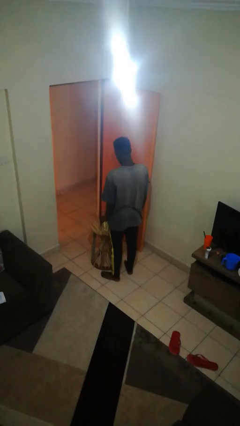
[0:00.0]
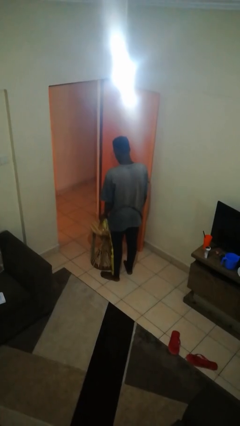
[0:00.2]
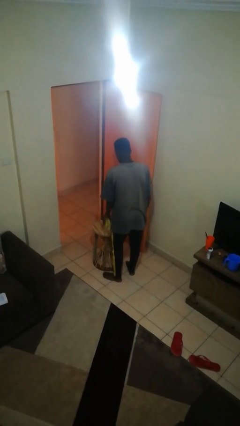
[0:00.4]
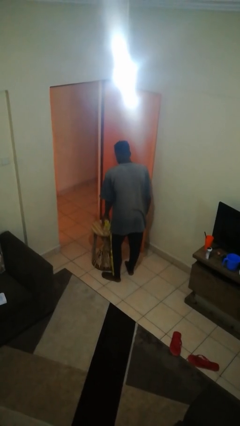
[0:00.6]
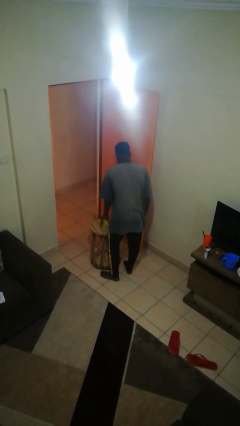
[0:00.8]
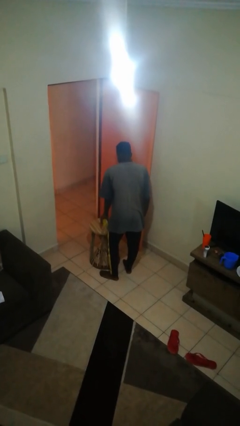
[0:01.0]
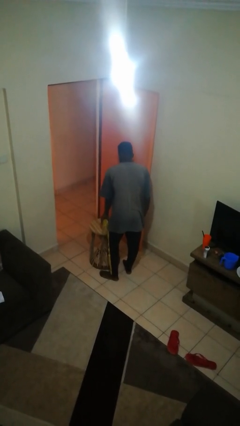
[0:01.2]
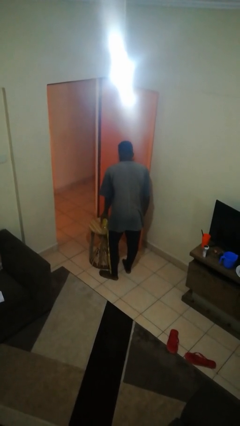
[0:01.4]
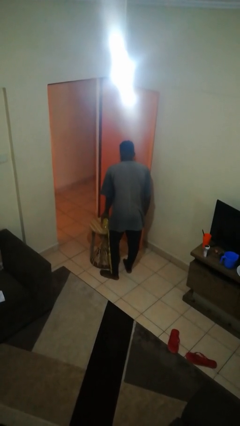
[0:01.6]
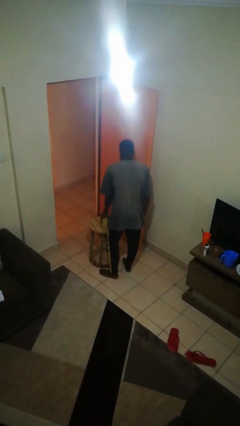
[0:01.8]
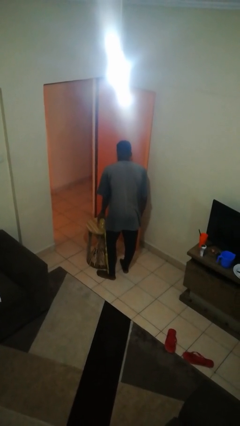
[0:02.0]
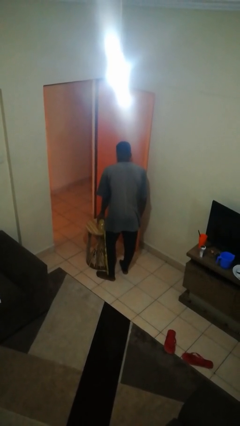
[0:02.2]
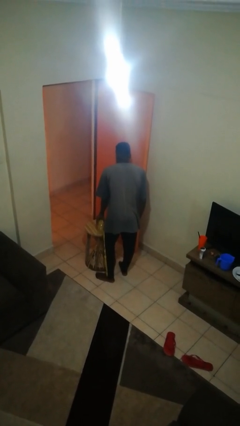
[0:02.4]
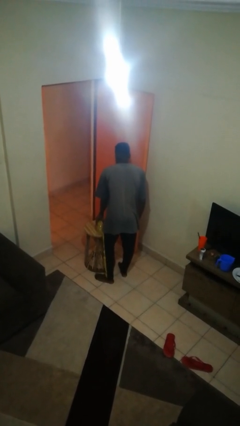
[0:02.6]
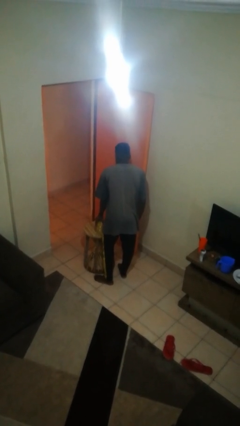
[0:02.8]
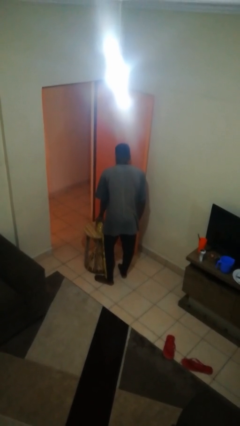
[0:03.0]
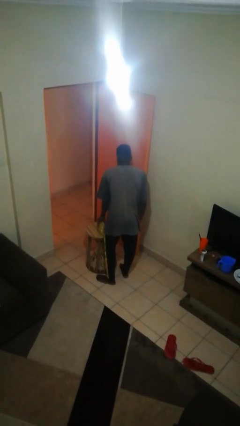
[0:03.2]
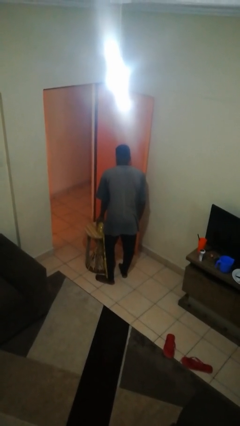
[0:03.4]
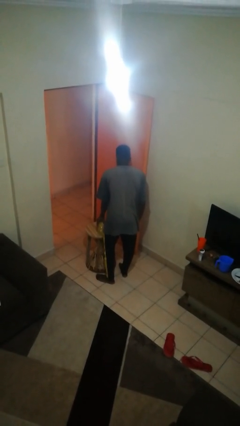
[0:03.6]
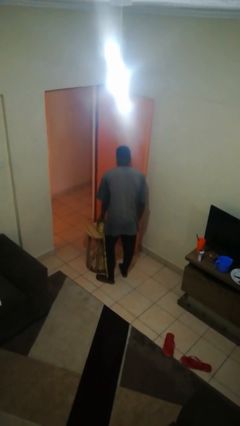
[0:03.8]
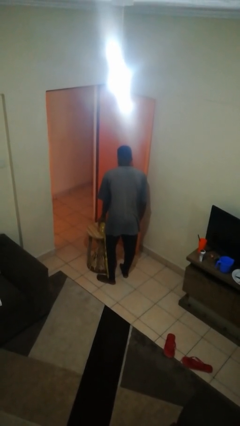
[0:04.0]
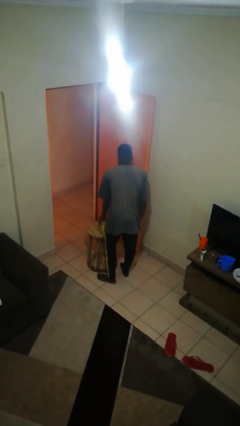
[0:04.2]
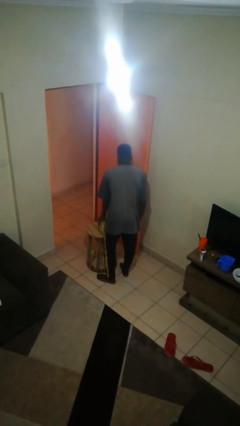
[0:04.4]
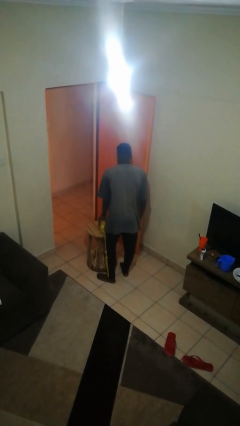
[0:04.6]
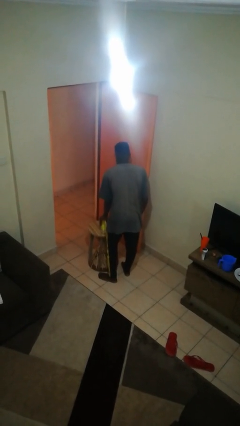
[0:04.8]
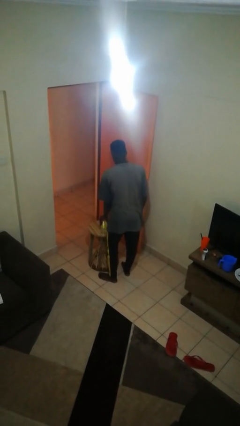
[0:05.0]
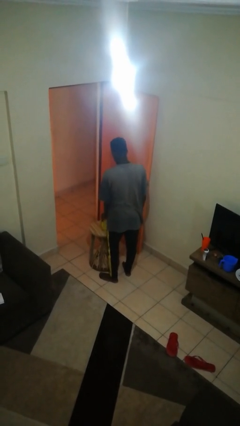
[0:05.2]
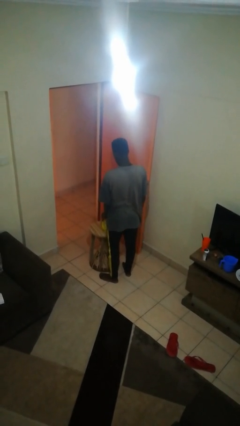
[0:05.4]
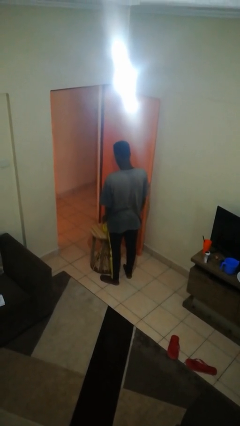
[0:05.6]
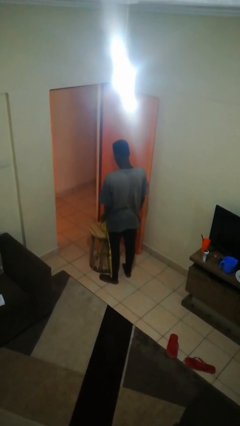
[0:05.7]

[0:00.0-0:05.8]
person pours liquid into cup

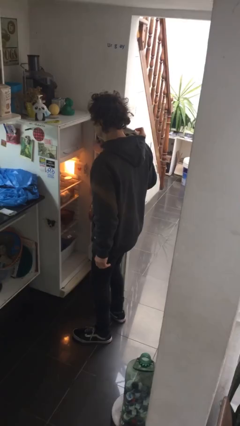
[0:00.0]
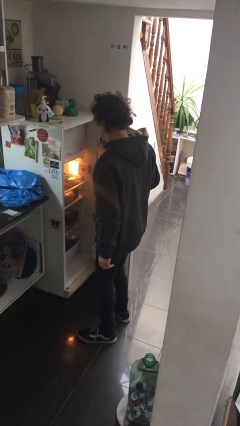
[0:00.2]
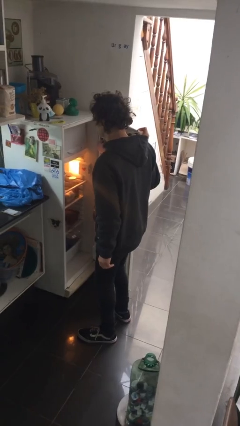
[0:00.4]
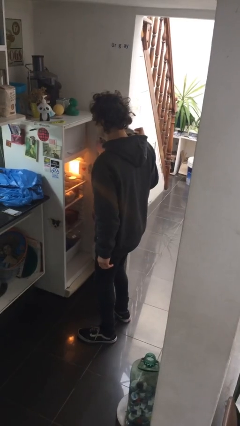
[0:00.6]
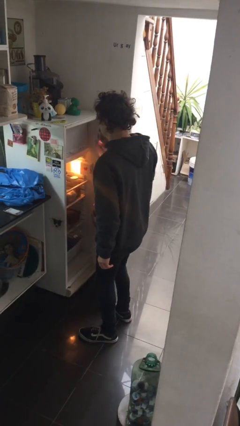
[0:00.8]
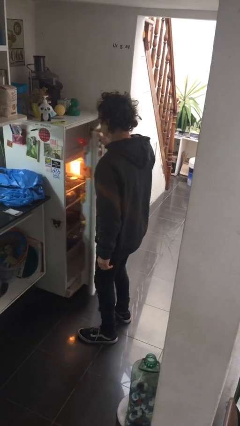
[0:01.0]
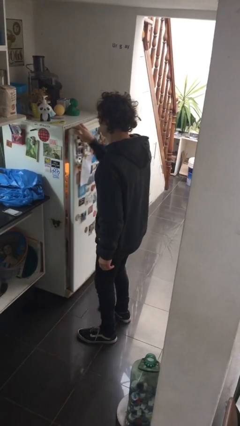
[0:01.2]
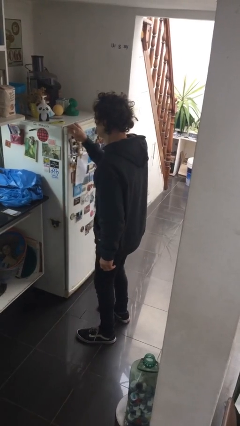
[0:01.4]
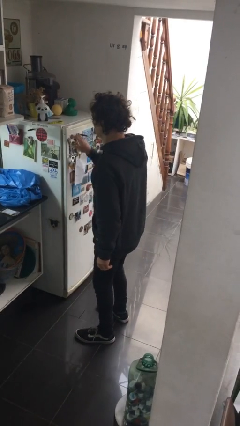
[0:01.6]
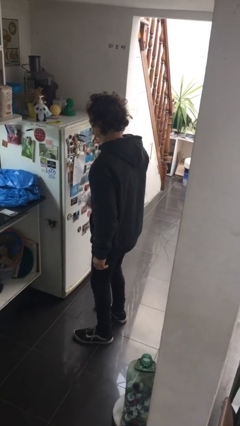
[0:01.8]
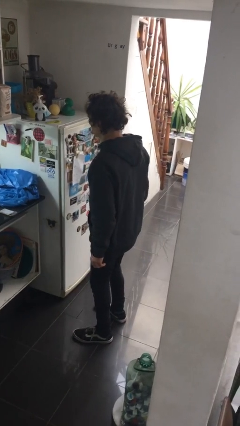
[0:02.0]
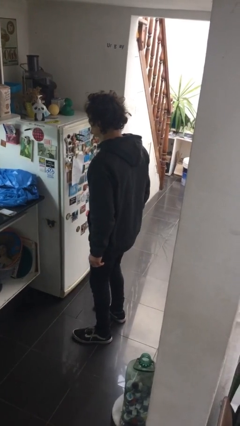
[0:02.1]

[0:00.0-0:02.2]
person closes refrigerator

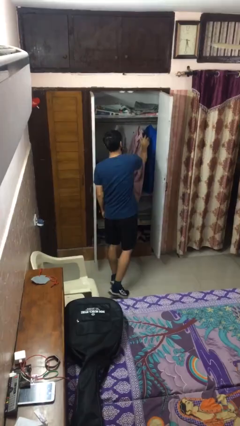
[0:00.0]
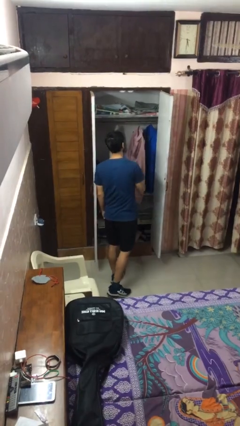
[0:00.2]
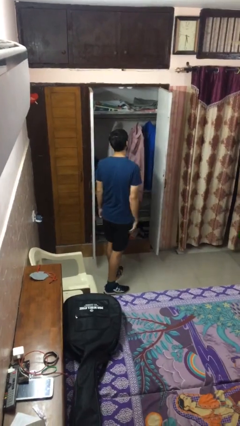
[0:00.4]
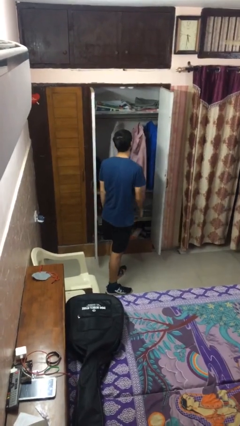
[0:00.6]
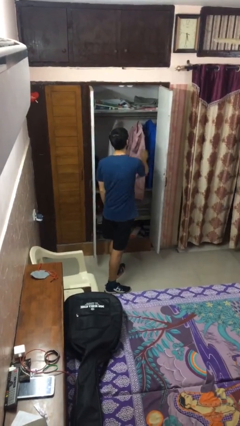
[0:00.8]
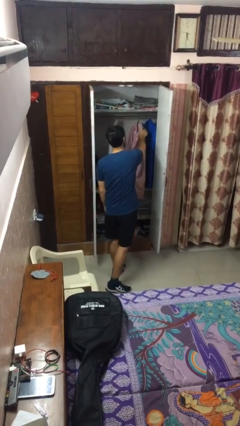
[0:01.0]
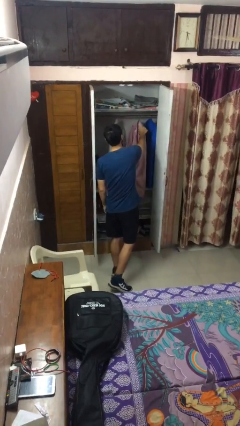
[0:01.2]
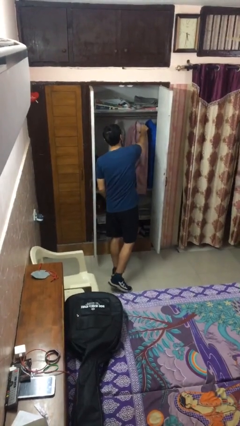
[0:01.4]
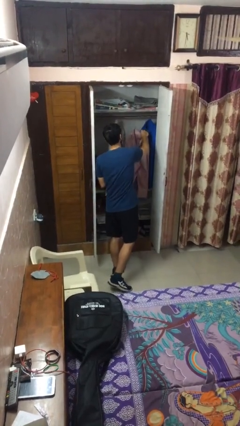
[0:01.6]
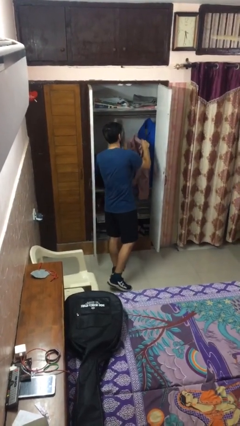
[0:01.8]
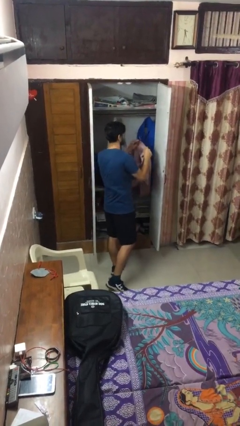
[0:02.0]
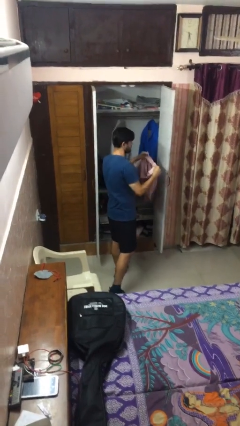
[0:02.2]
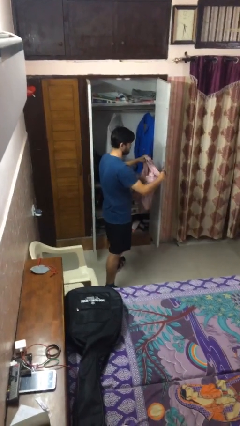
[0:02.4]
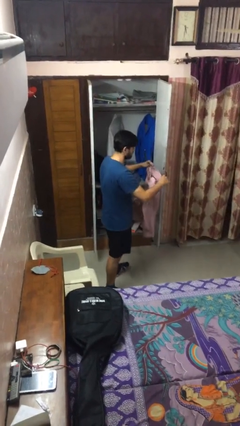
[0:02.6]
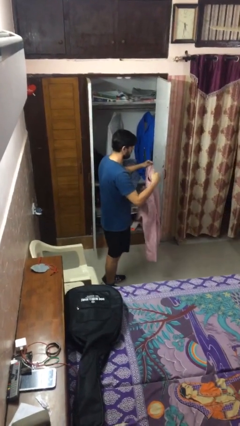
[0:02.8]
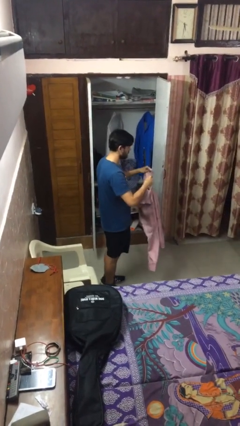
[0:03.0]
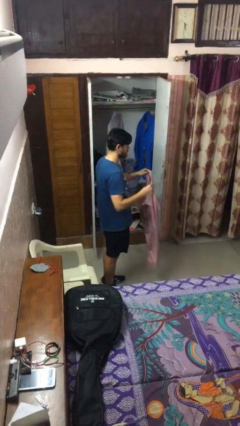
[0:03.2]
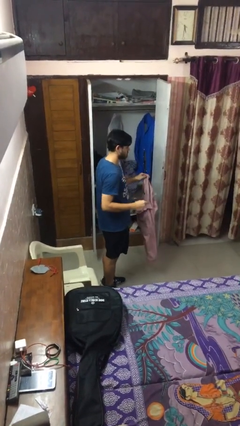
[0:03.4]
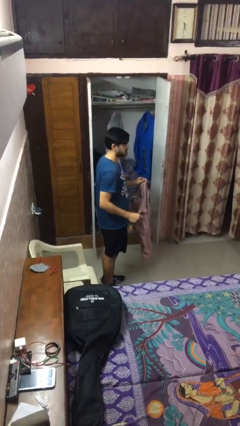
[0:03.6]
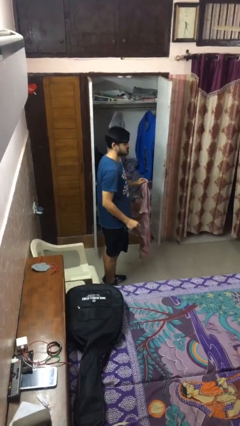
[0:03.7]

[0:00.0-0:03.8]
person takes clothes from closet

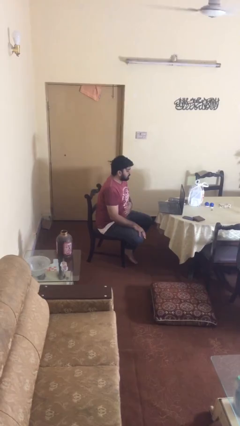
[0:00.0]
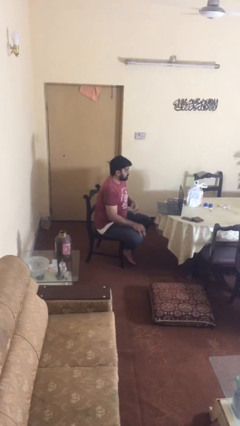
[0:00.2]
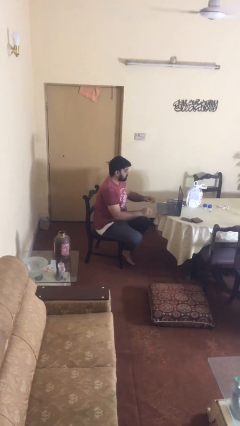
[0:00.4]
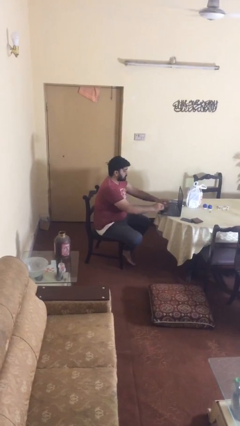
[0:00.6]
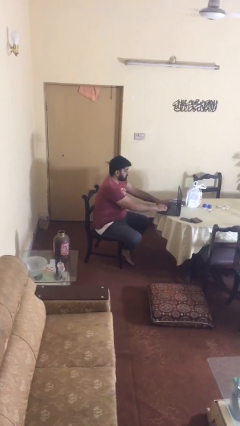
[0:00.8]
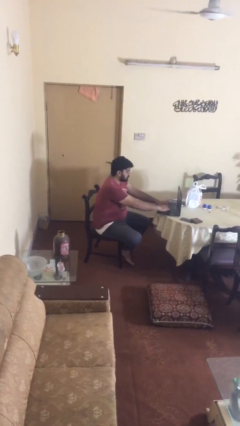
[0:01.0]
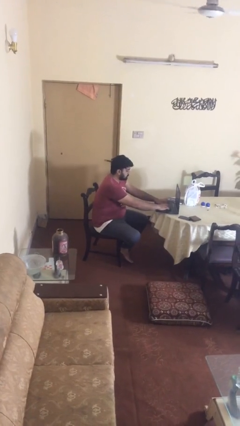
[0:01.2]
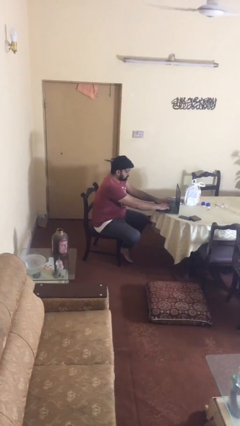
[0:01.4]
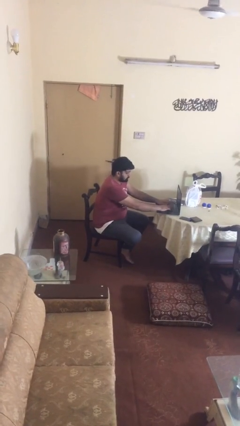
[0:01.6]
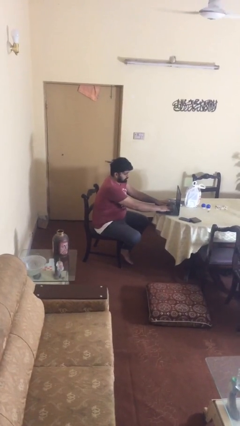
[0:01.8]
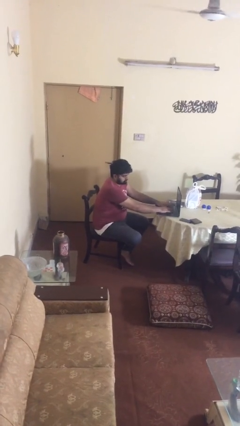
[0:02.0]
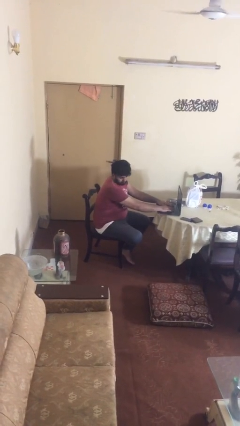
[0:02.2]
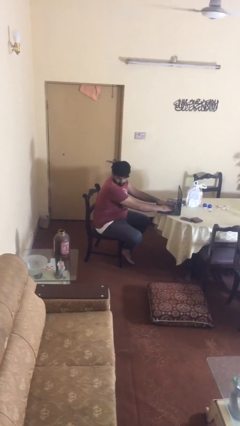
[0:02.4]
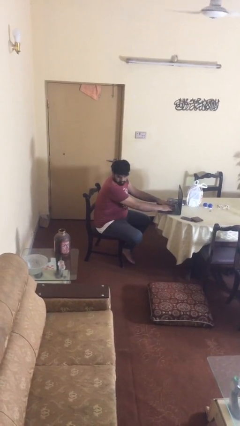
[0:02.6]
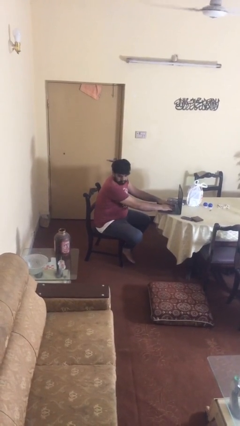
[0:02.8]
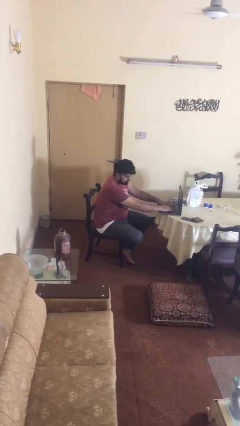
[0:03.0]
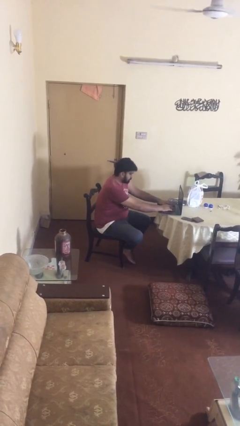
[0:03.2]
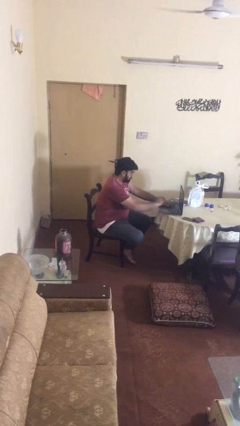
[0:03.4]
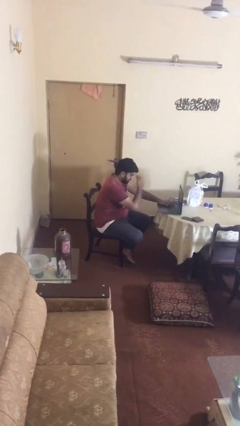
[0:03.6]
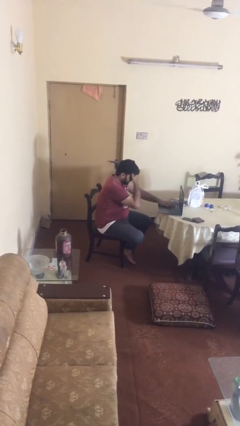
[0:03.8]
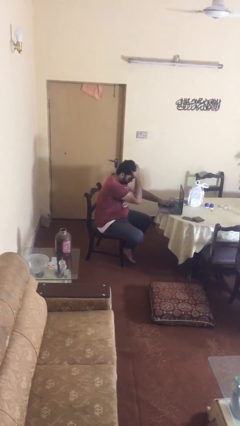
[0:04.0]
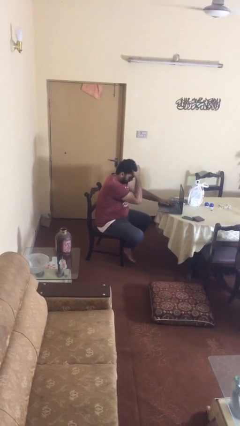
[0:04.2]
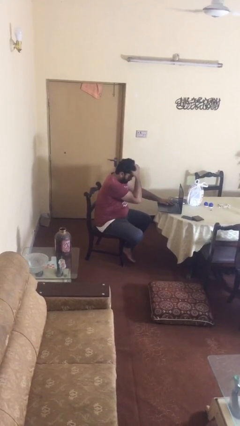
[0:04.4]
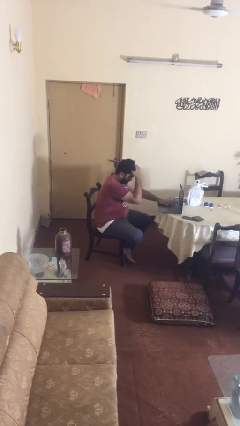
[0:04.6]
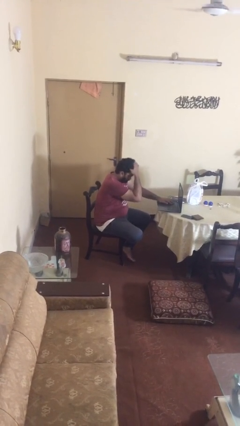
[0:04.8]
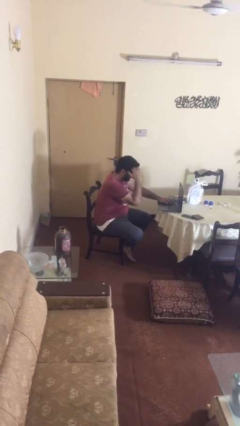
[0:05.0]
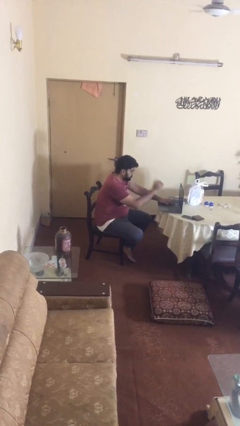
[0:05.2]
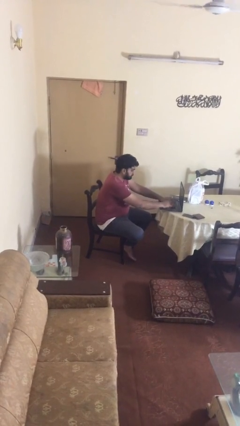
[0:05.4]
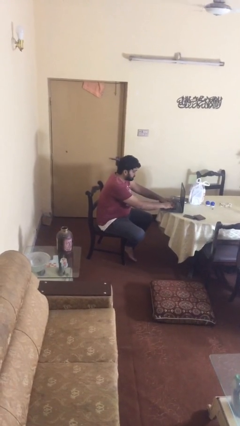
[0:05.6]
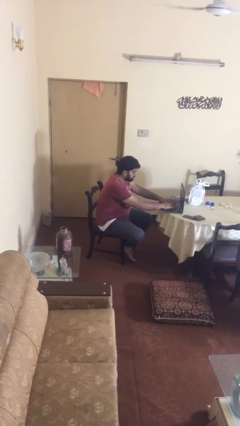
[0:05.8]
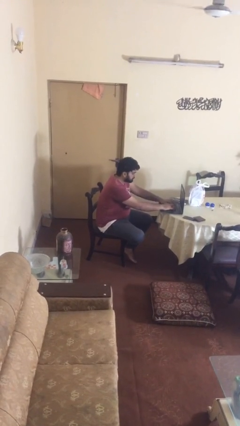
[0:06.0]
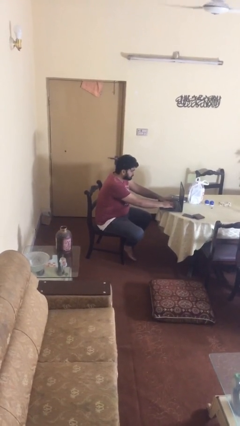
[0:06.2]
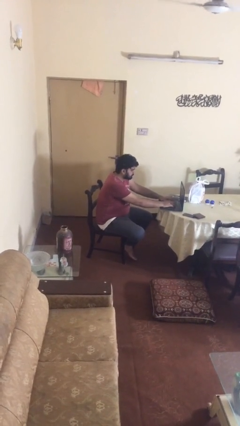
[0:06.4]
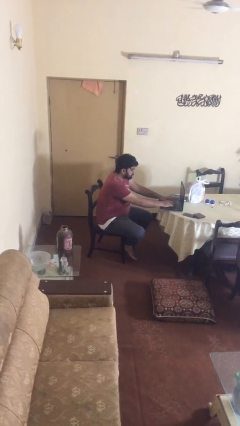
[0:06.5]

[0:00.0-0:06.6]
person interacts with laptop
